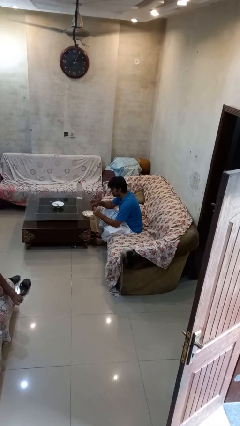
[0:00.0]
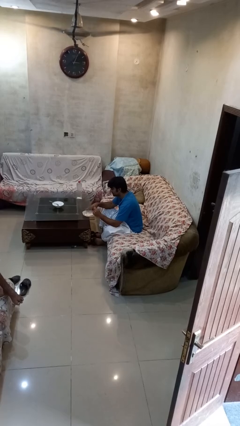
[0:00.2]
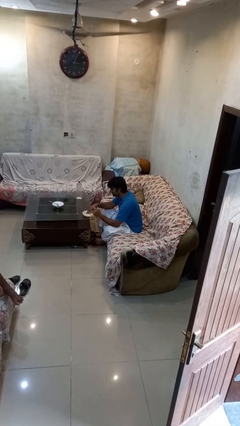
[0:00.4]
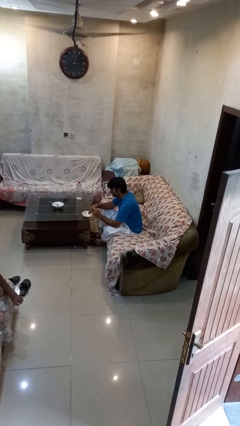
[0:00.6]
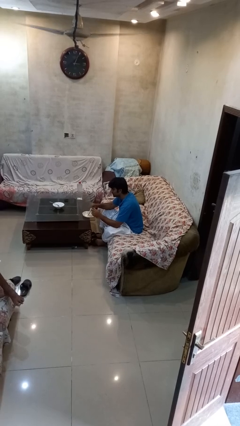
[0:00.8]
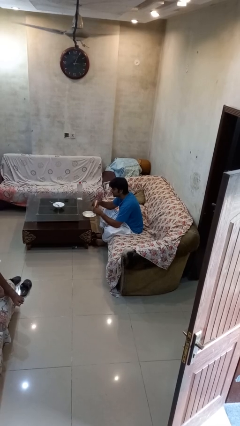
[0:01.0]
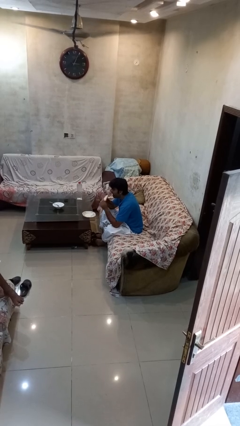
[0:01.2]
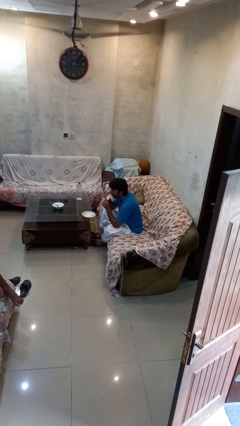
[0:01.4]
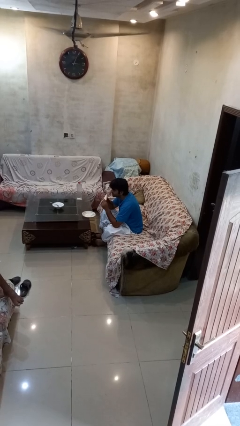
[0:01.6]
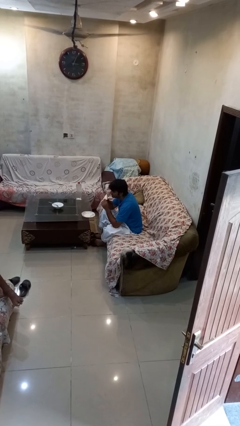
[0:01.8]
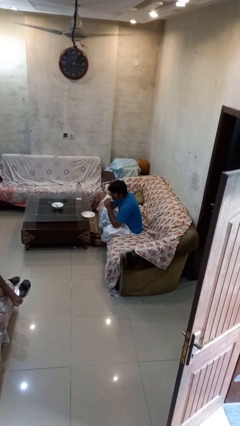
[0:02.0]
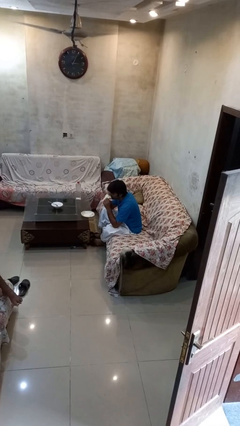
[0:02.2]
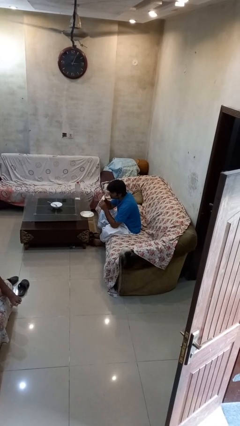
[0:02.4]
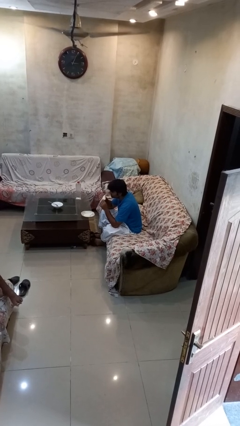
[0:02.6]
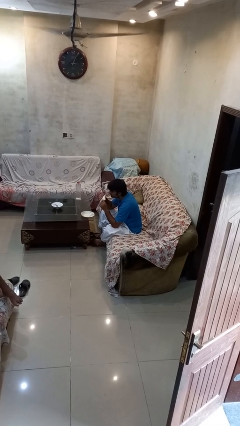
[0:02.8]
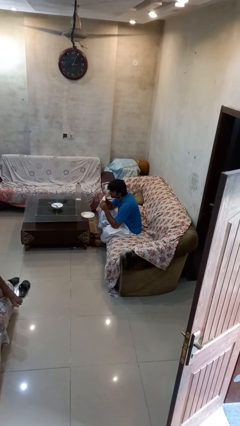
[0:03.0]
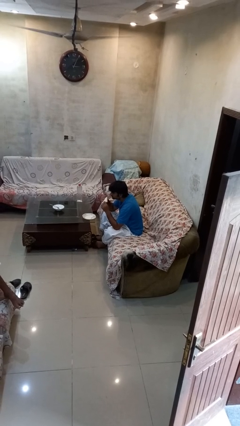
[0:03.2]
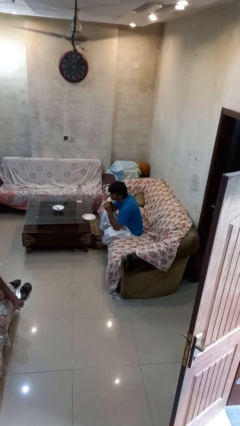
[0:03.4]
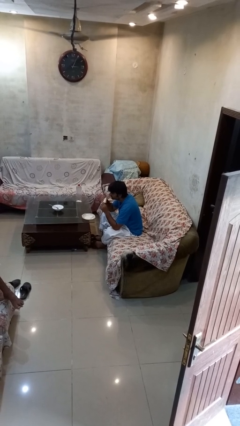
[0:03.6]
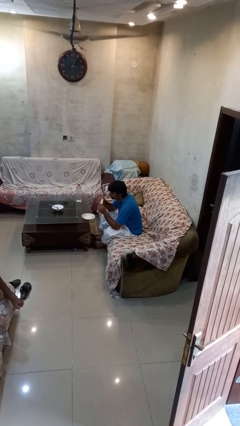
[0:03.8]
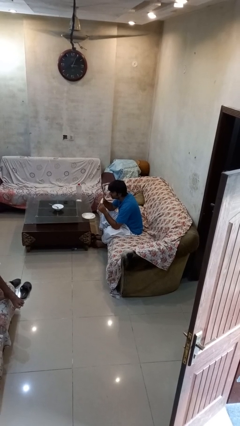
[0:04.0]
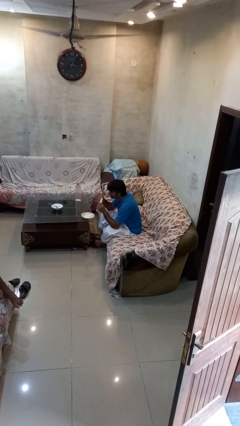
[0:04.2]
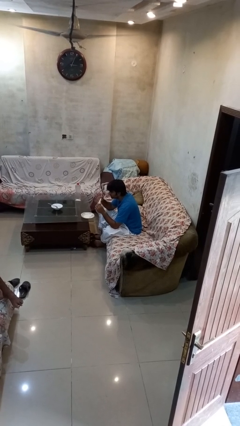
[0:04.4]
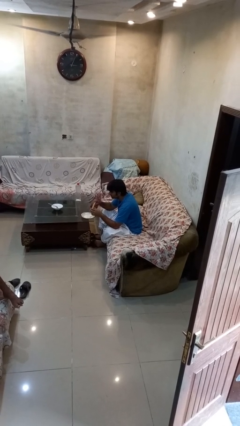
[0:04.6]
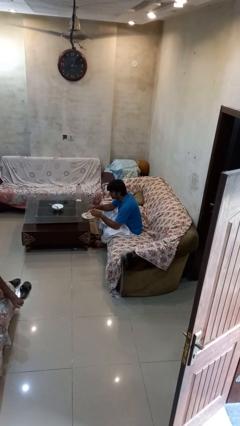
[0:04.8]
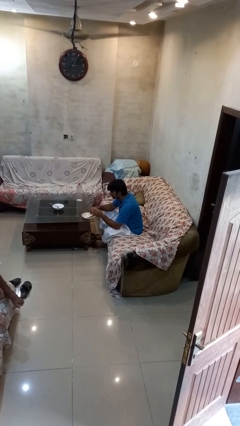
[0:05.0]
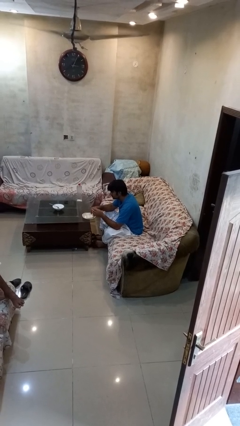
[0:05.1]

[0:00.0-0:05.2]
person eats with hands

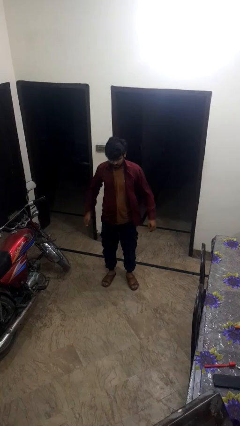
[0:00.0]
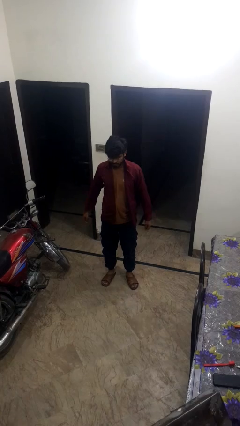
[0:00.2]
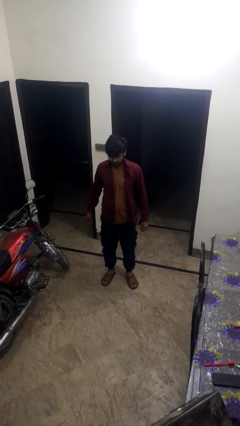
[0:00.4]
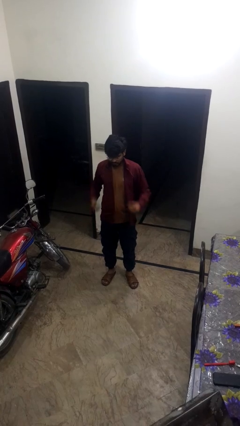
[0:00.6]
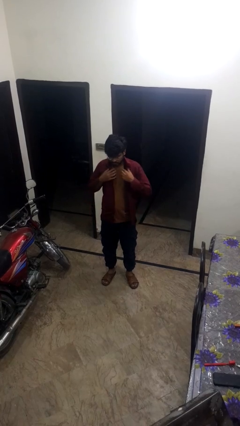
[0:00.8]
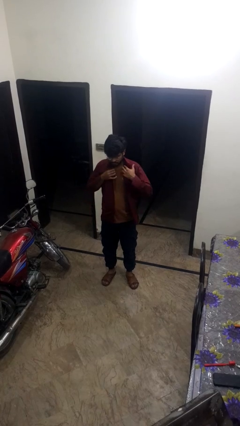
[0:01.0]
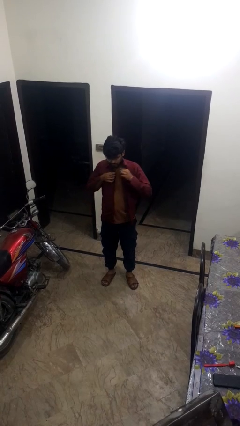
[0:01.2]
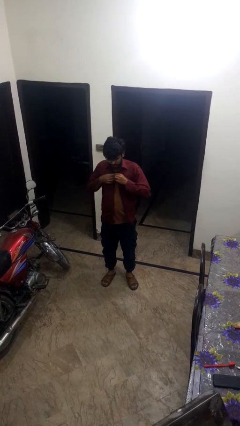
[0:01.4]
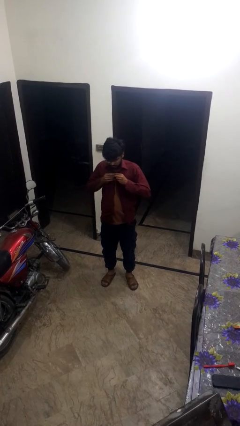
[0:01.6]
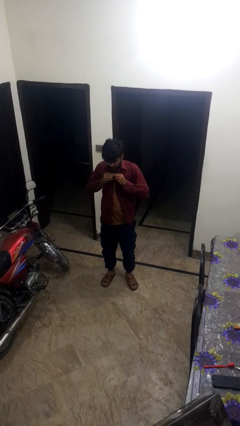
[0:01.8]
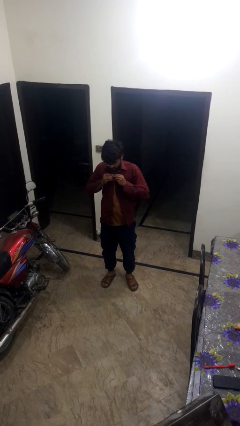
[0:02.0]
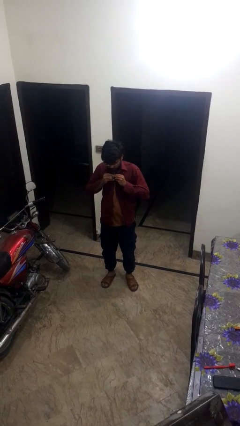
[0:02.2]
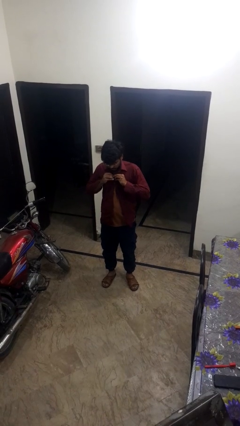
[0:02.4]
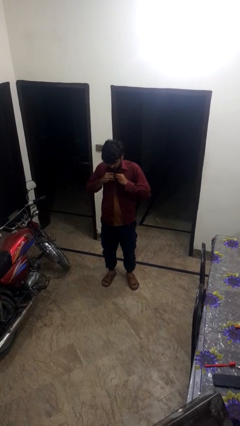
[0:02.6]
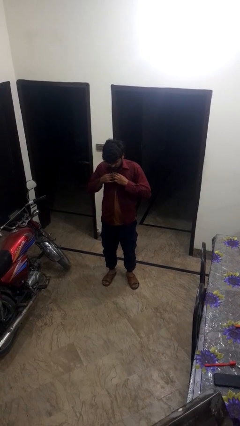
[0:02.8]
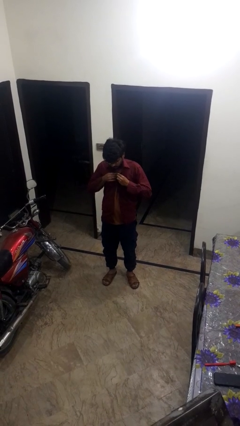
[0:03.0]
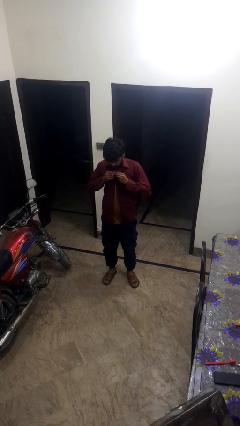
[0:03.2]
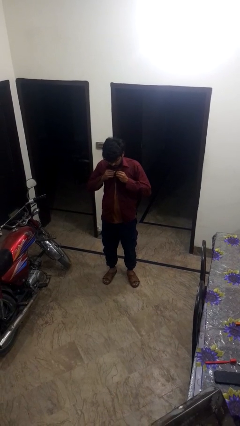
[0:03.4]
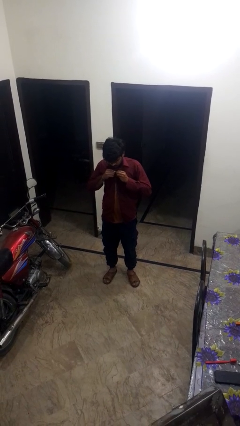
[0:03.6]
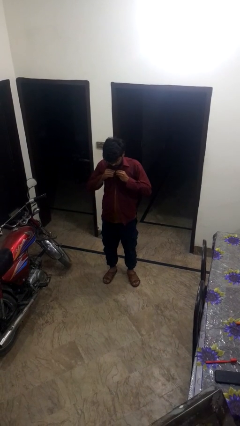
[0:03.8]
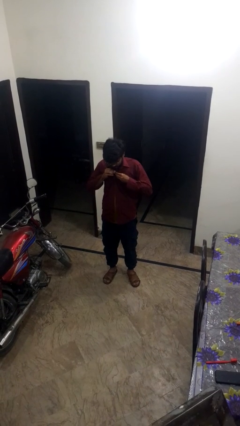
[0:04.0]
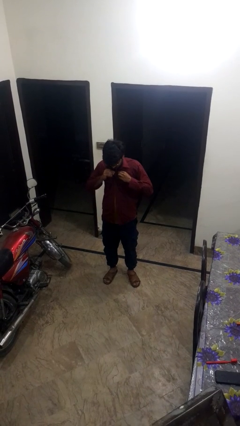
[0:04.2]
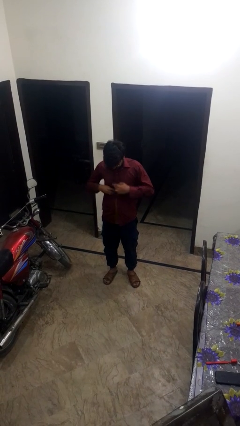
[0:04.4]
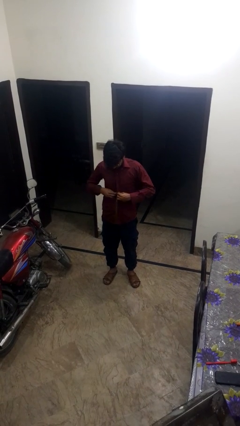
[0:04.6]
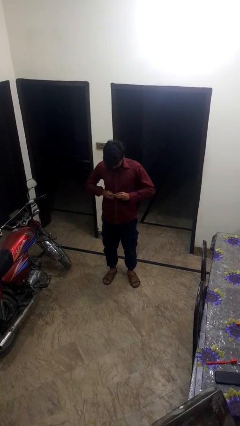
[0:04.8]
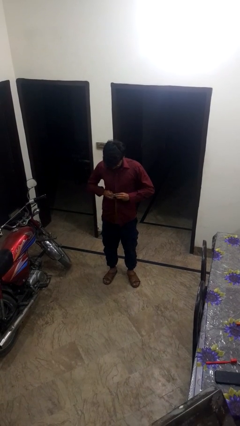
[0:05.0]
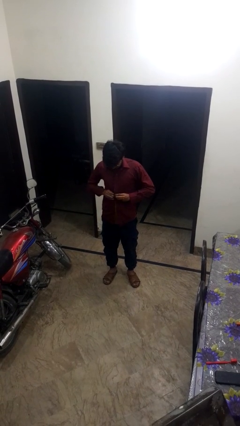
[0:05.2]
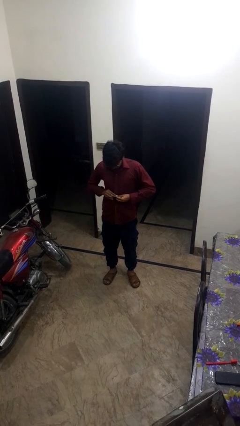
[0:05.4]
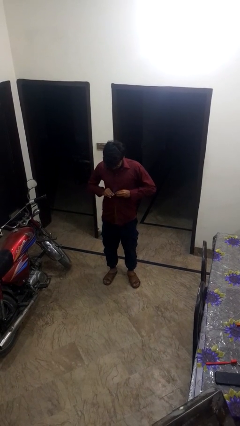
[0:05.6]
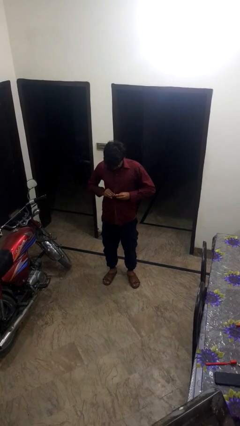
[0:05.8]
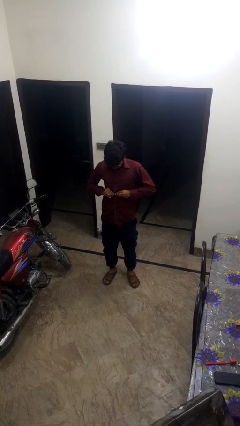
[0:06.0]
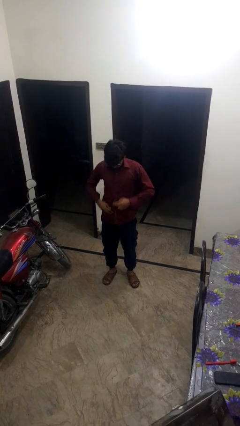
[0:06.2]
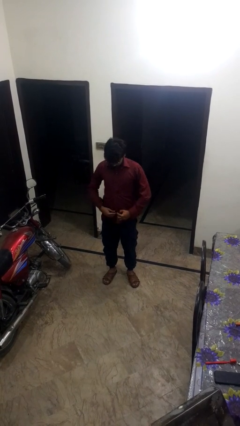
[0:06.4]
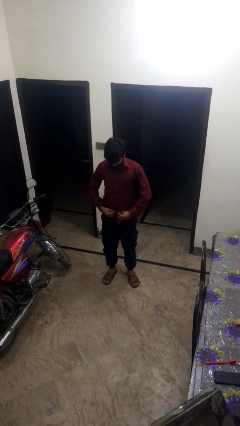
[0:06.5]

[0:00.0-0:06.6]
person buttons shirt

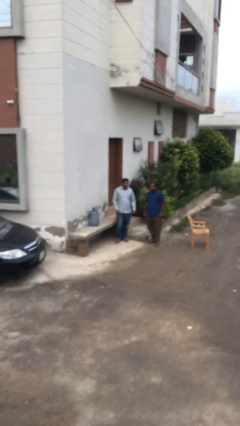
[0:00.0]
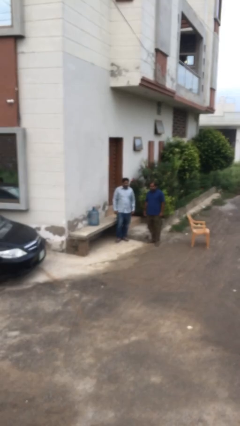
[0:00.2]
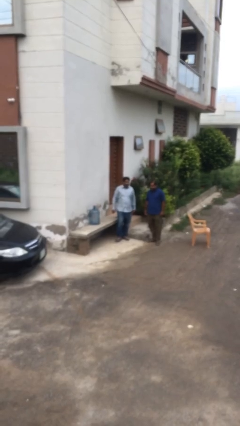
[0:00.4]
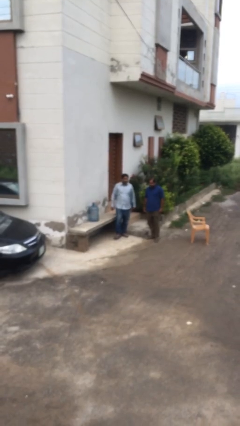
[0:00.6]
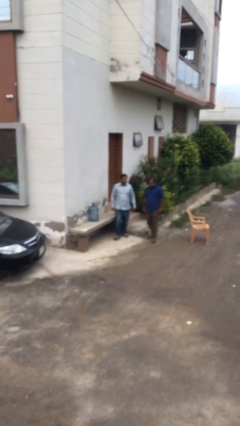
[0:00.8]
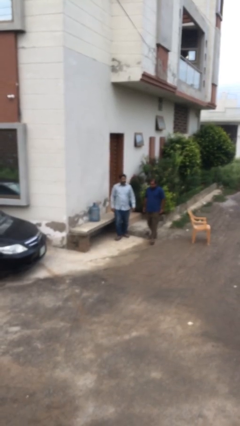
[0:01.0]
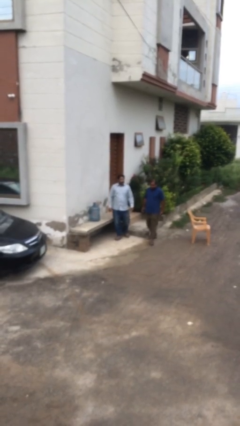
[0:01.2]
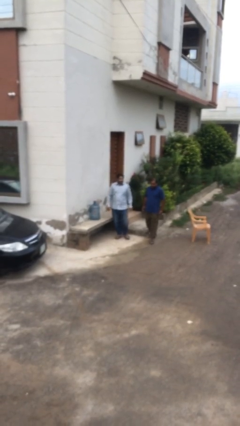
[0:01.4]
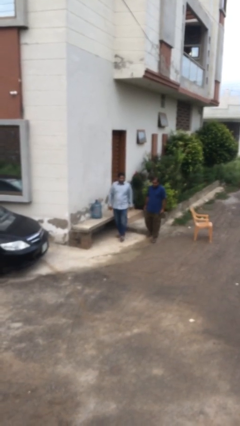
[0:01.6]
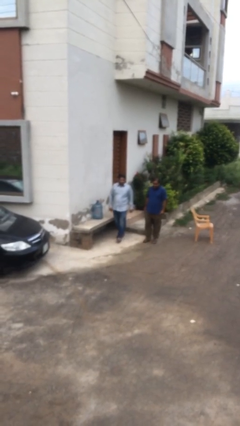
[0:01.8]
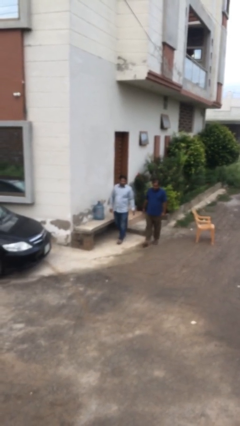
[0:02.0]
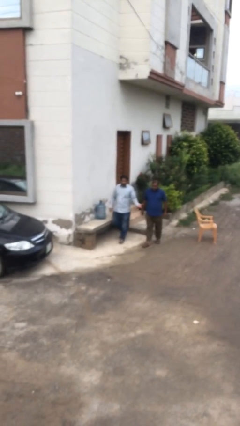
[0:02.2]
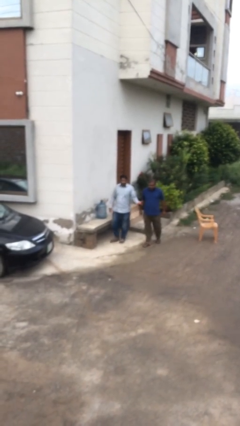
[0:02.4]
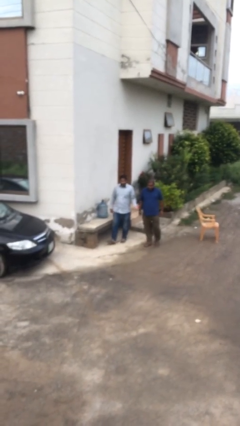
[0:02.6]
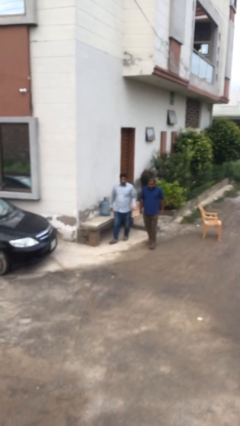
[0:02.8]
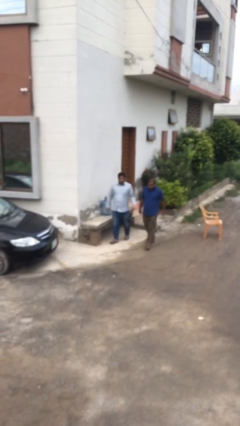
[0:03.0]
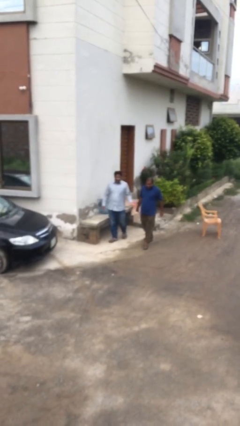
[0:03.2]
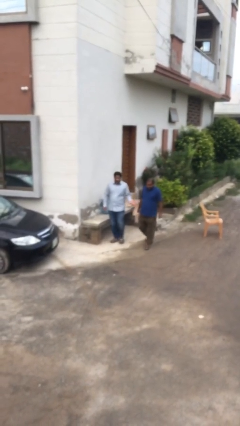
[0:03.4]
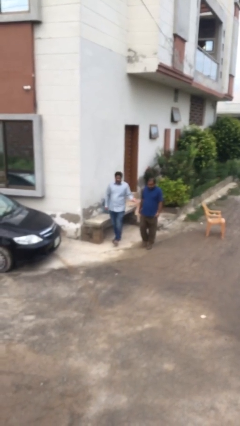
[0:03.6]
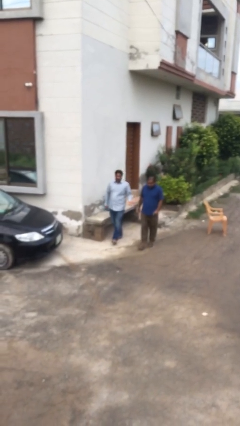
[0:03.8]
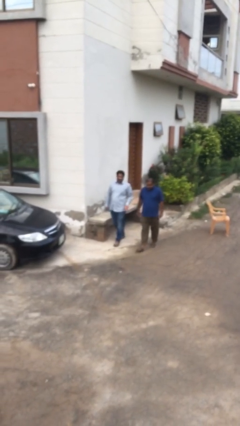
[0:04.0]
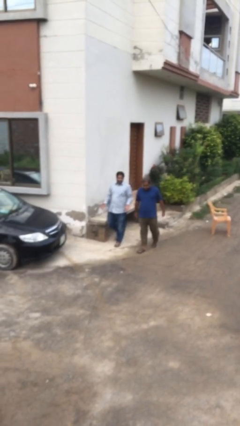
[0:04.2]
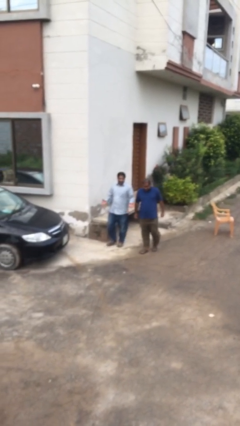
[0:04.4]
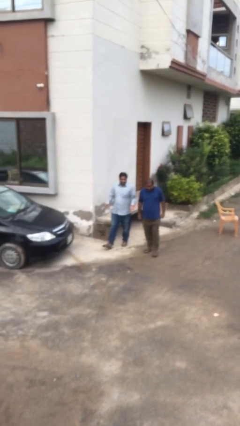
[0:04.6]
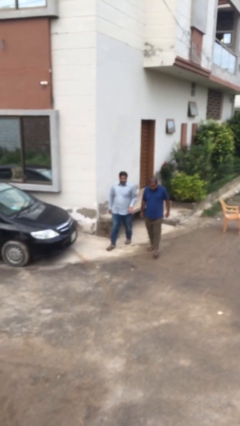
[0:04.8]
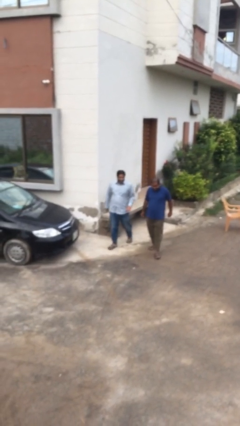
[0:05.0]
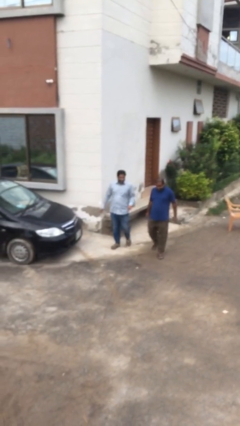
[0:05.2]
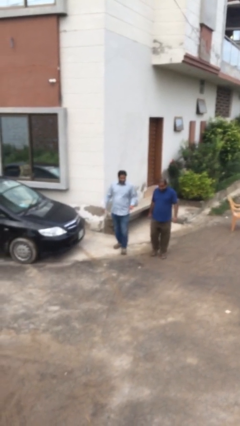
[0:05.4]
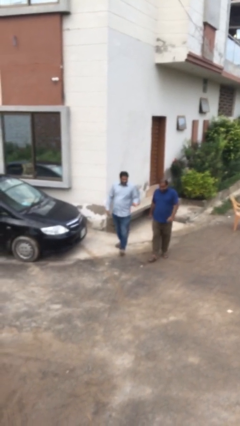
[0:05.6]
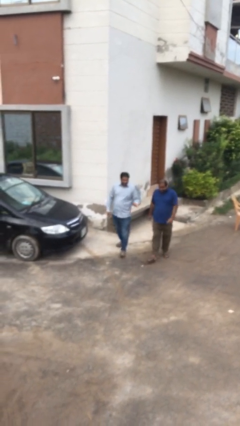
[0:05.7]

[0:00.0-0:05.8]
person talks to person

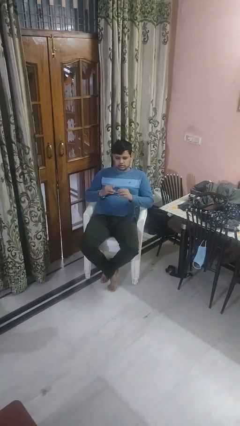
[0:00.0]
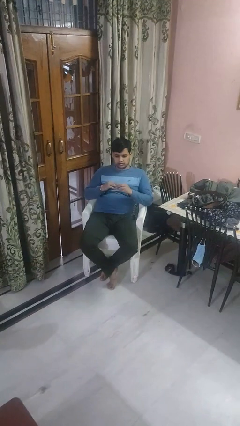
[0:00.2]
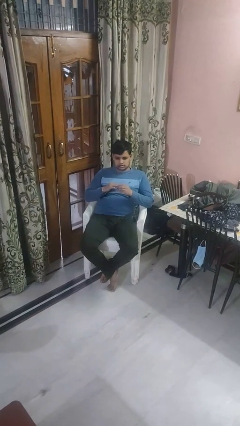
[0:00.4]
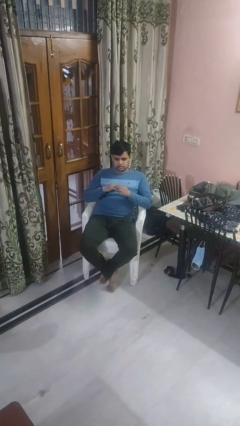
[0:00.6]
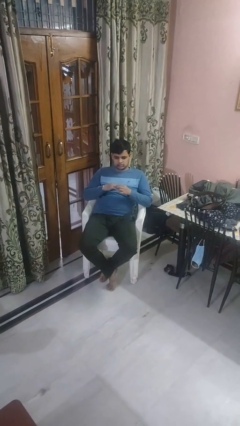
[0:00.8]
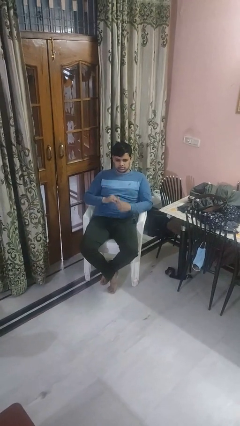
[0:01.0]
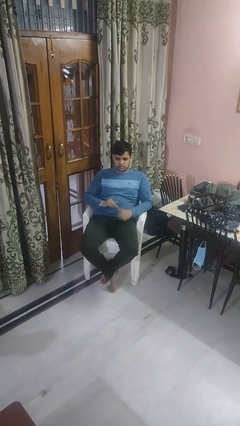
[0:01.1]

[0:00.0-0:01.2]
person puts on ring
